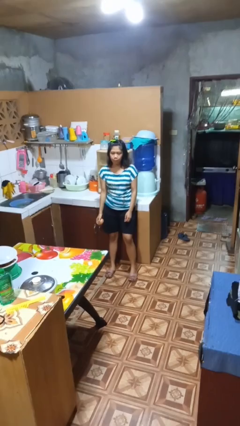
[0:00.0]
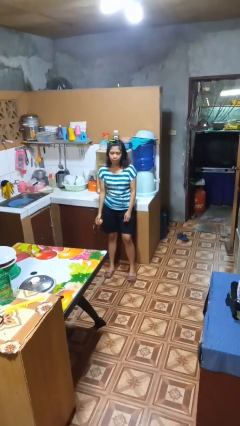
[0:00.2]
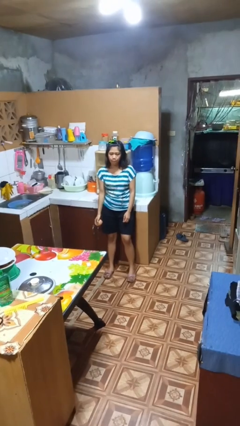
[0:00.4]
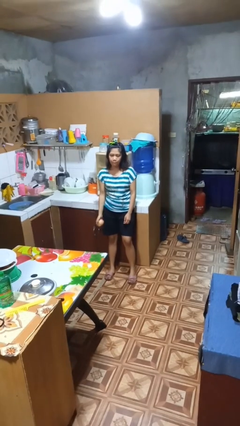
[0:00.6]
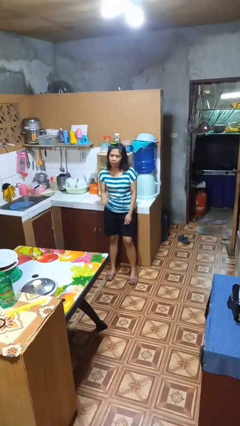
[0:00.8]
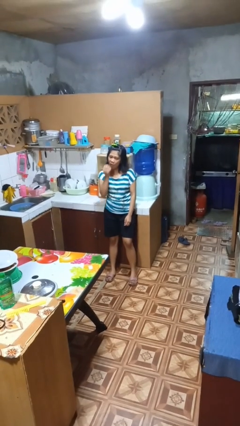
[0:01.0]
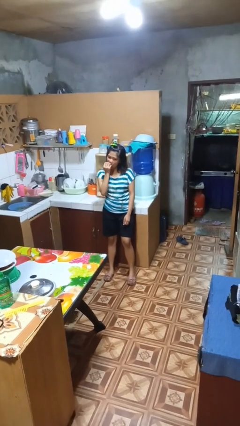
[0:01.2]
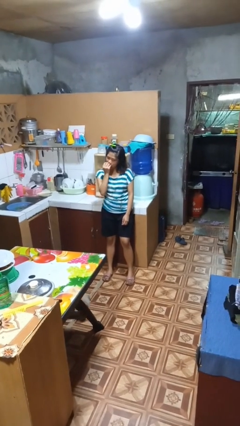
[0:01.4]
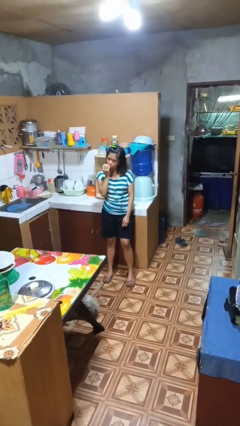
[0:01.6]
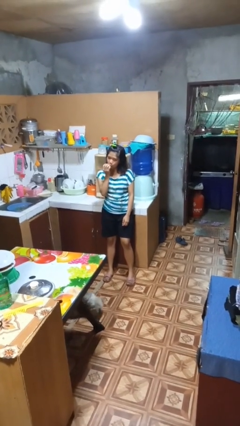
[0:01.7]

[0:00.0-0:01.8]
person eats apple

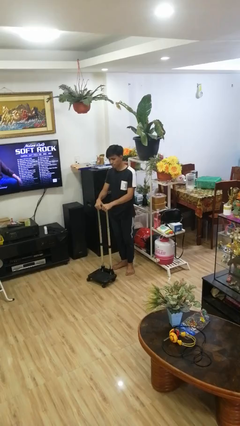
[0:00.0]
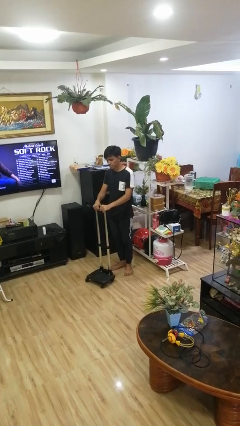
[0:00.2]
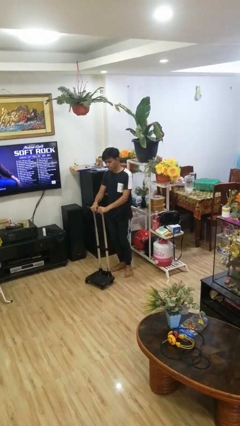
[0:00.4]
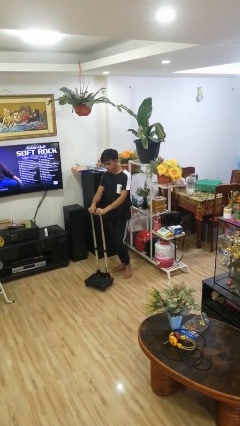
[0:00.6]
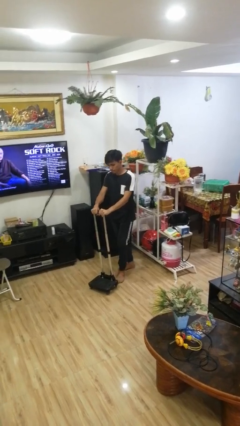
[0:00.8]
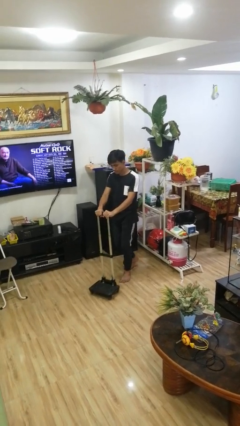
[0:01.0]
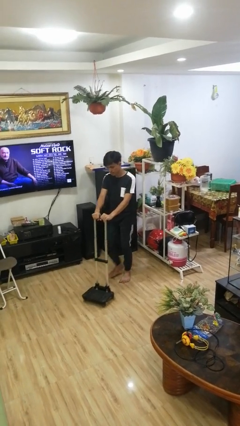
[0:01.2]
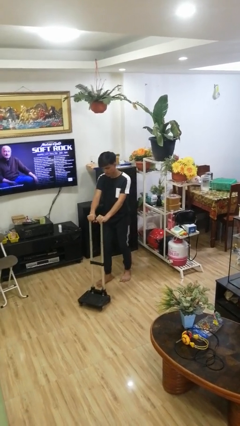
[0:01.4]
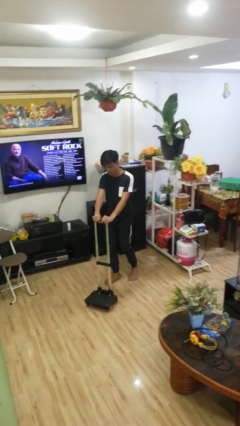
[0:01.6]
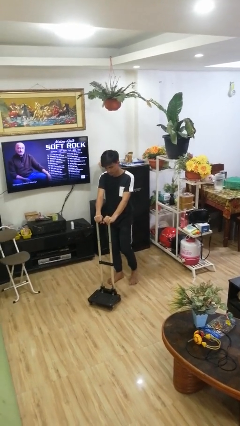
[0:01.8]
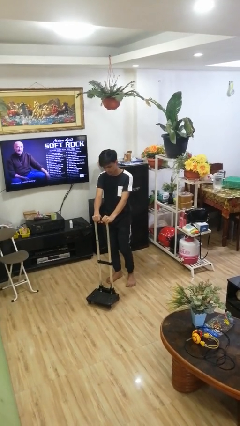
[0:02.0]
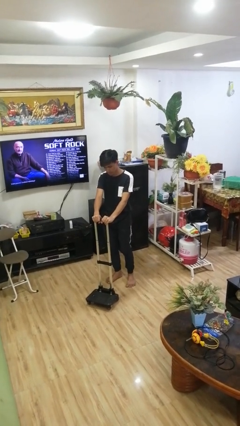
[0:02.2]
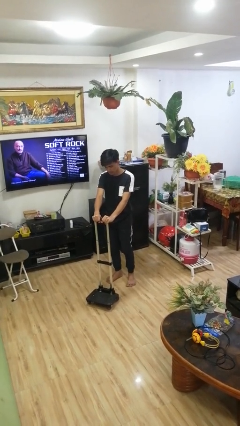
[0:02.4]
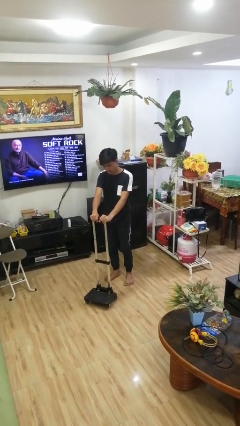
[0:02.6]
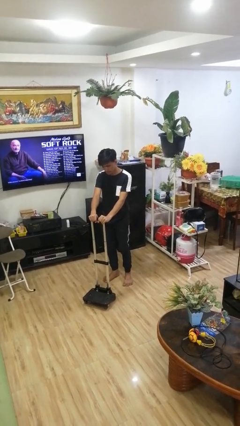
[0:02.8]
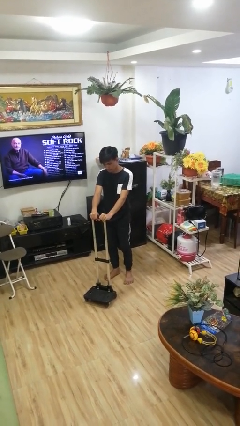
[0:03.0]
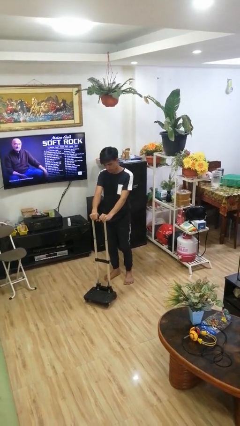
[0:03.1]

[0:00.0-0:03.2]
person pushes wheeled cart

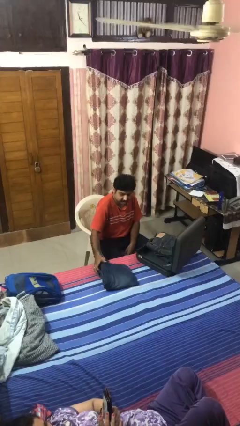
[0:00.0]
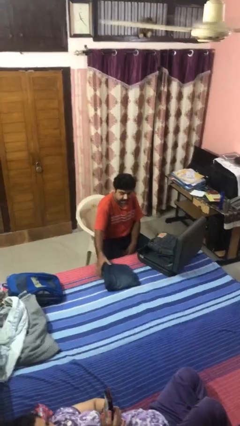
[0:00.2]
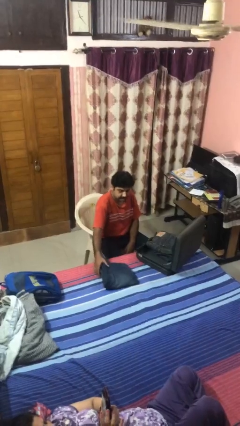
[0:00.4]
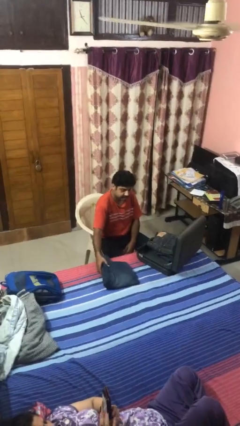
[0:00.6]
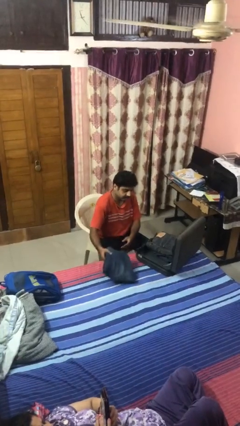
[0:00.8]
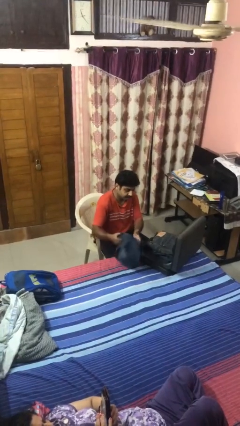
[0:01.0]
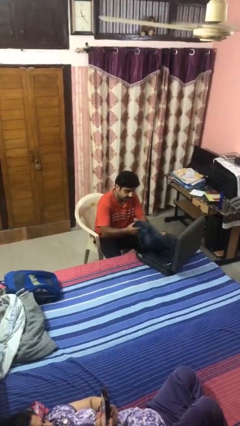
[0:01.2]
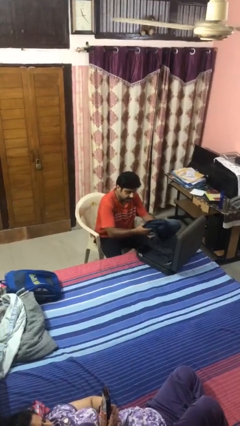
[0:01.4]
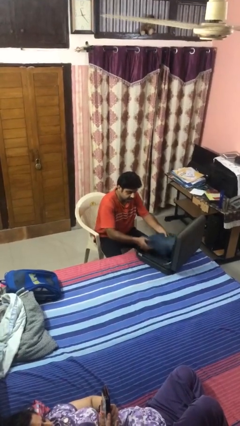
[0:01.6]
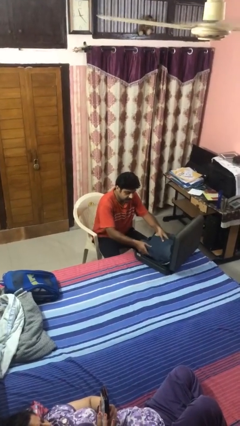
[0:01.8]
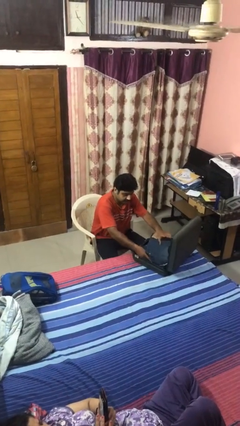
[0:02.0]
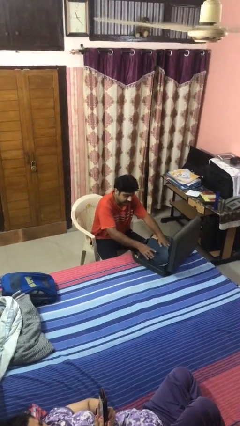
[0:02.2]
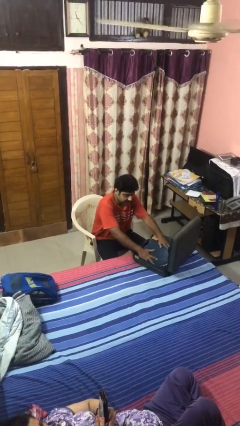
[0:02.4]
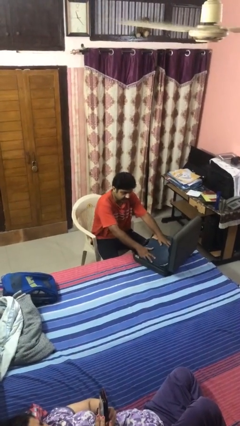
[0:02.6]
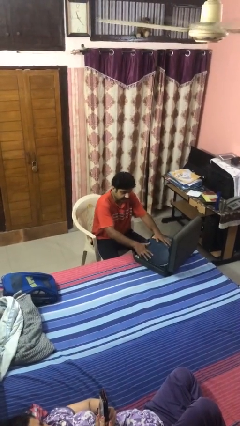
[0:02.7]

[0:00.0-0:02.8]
person loads clothes into suitcase

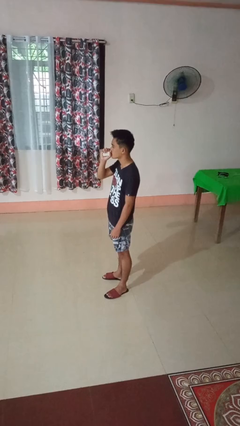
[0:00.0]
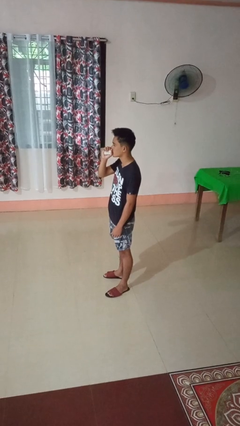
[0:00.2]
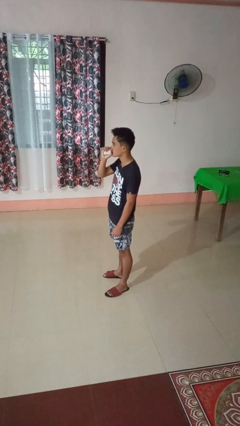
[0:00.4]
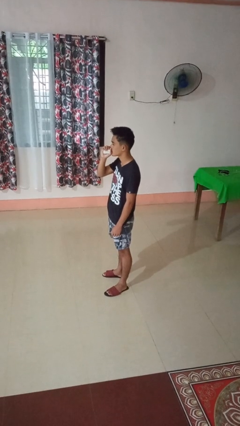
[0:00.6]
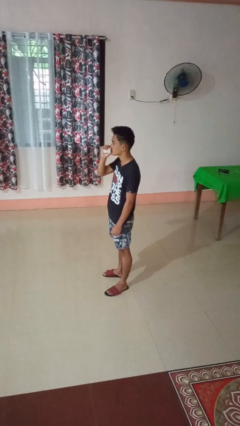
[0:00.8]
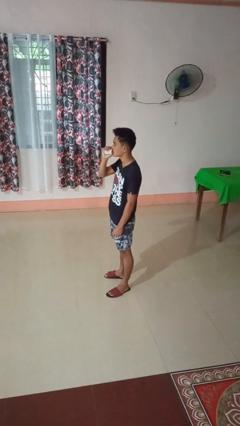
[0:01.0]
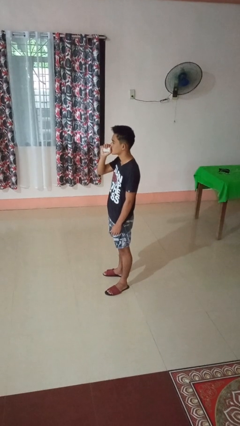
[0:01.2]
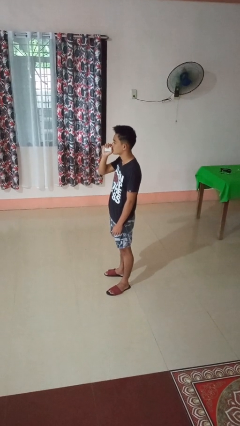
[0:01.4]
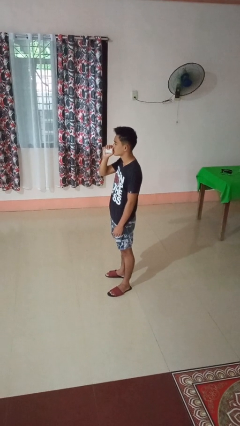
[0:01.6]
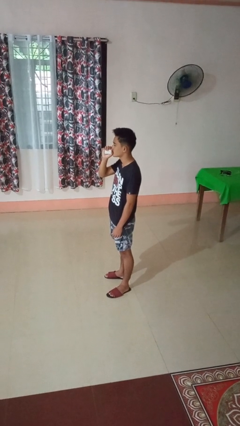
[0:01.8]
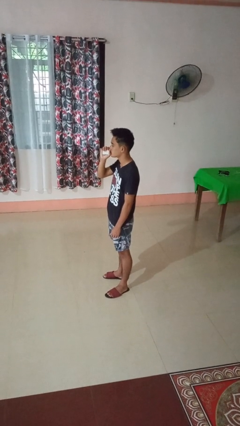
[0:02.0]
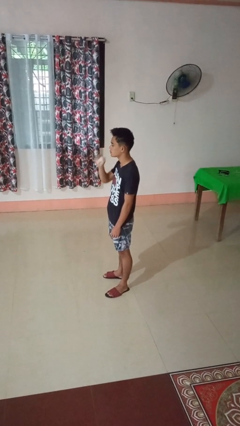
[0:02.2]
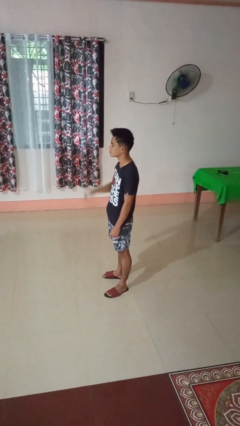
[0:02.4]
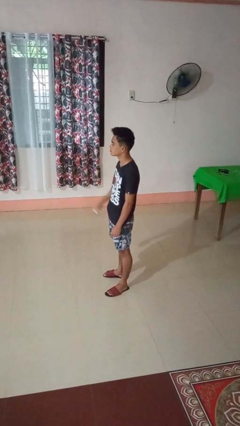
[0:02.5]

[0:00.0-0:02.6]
person vapes

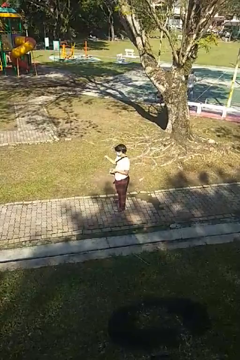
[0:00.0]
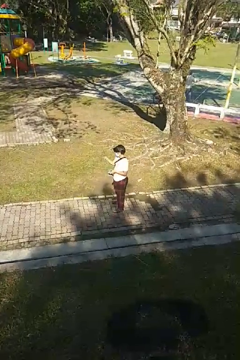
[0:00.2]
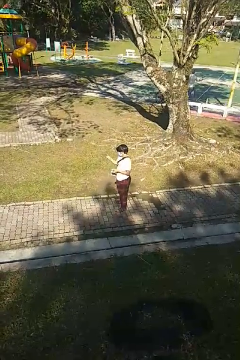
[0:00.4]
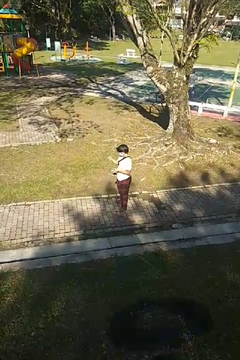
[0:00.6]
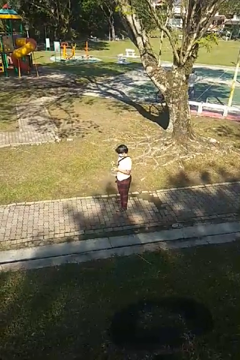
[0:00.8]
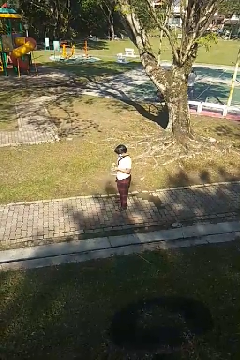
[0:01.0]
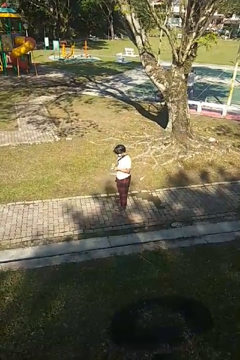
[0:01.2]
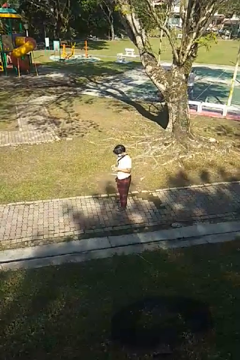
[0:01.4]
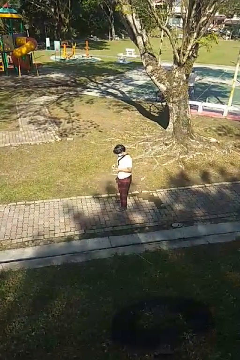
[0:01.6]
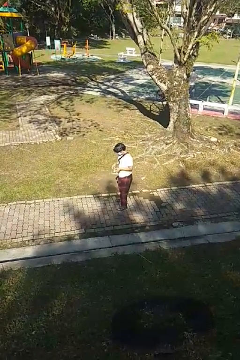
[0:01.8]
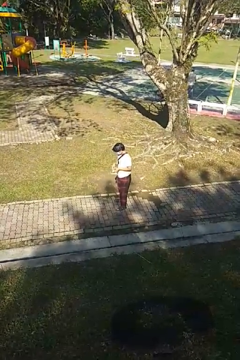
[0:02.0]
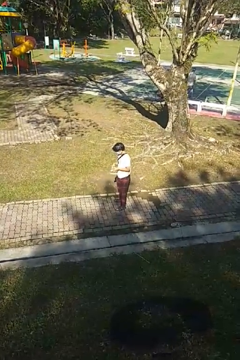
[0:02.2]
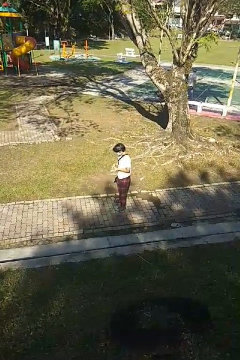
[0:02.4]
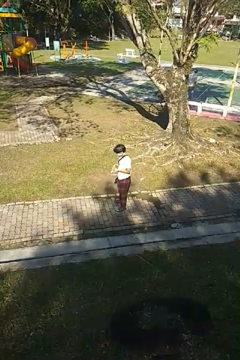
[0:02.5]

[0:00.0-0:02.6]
person puts object into purse

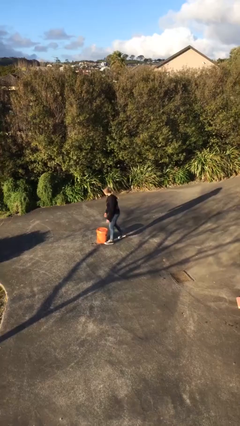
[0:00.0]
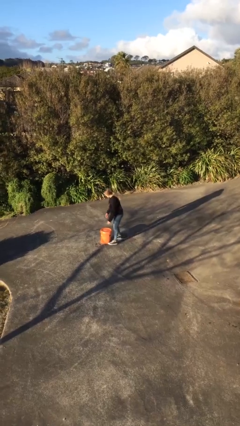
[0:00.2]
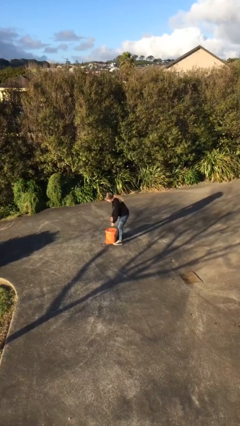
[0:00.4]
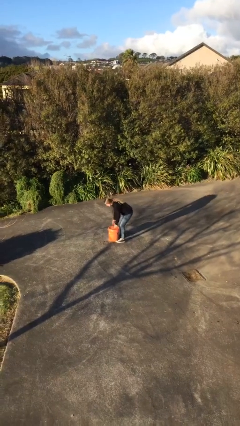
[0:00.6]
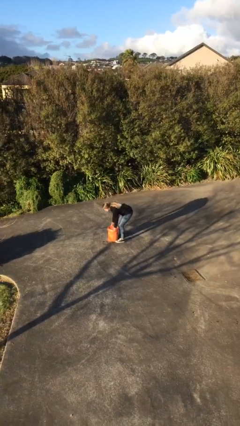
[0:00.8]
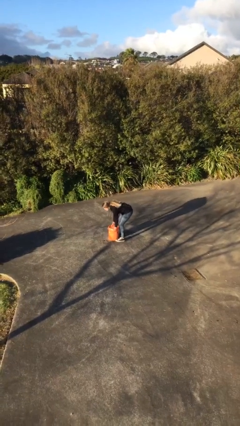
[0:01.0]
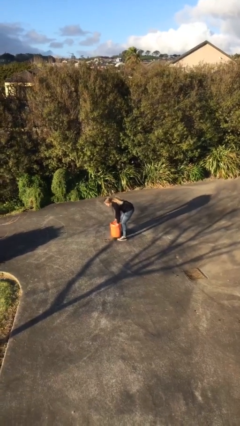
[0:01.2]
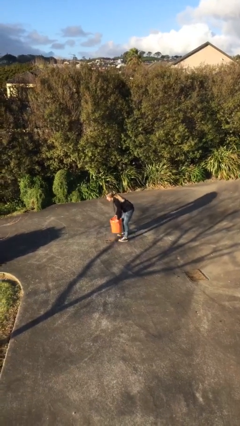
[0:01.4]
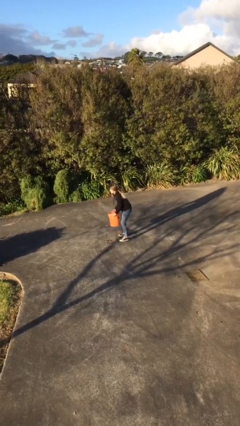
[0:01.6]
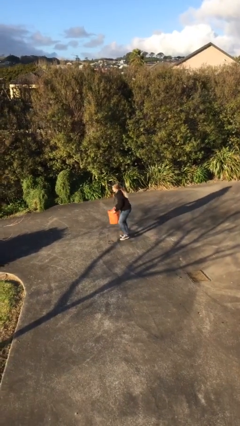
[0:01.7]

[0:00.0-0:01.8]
person picks up object from floor

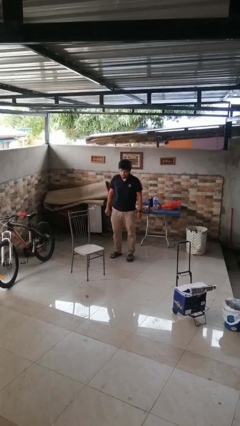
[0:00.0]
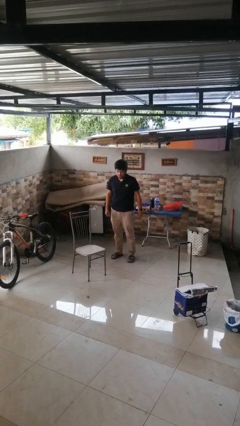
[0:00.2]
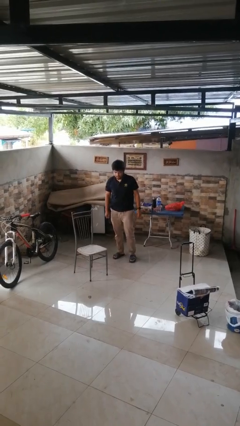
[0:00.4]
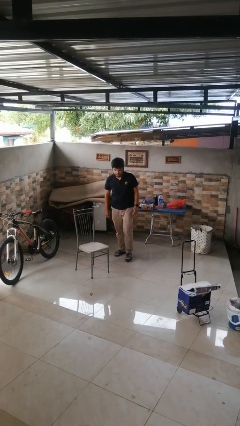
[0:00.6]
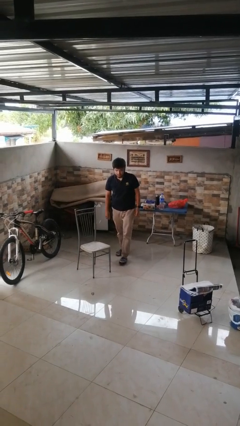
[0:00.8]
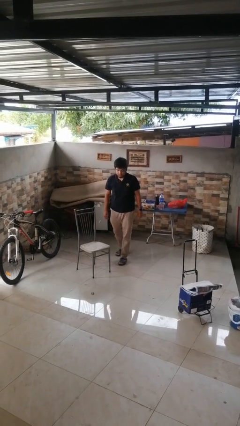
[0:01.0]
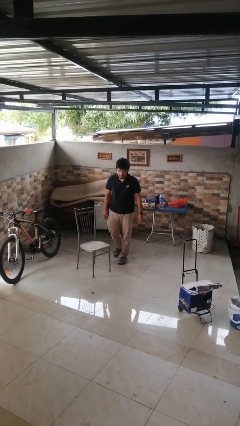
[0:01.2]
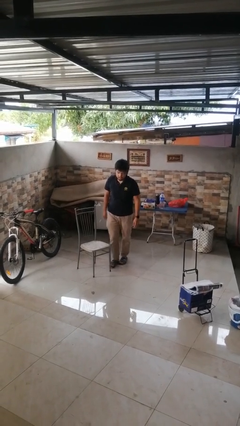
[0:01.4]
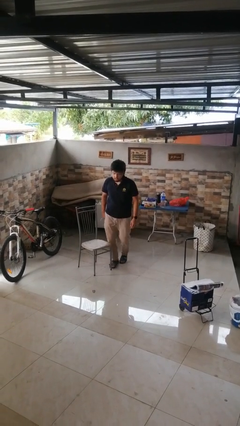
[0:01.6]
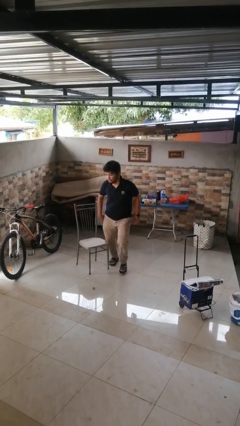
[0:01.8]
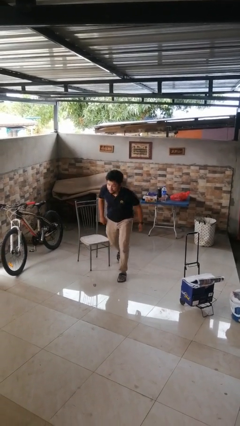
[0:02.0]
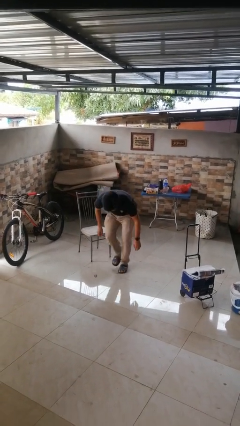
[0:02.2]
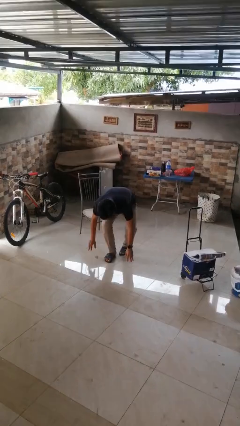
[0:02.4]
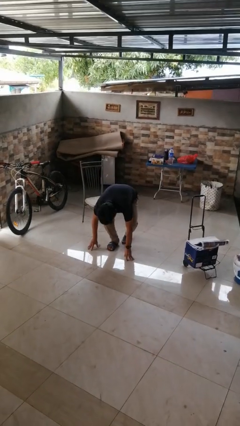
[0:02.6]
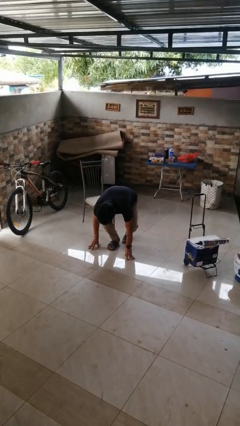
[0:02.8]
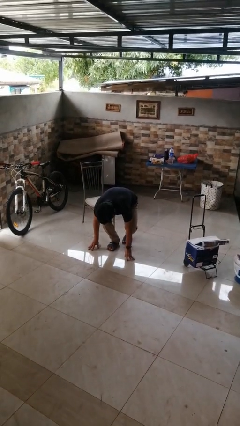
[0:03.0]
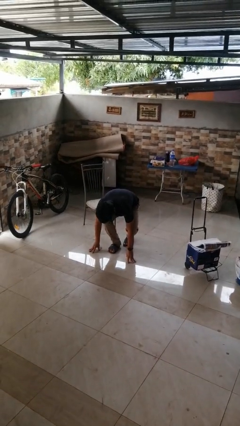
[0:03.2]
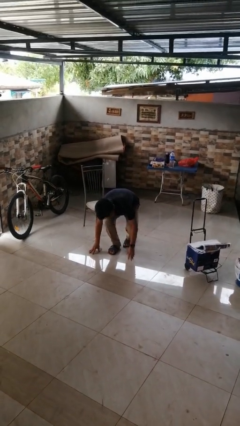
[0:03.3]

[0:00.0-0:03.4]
person trips on object on floor
